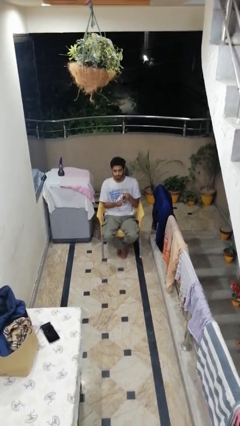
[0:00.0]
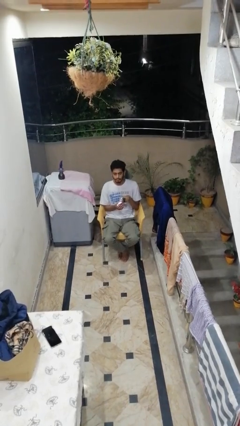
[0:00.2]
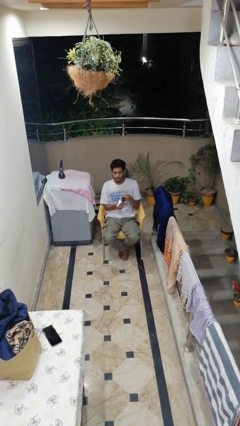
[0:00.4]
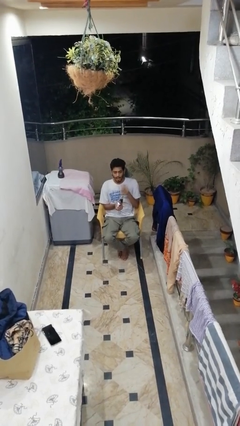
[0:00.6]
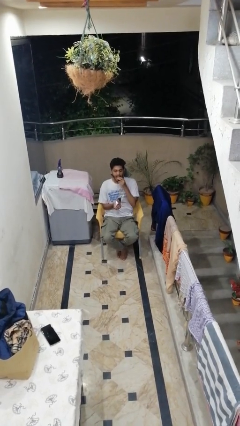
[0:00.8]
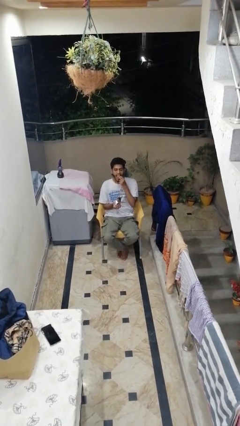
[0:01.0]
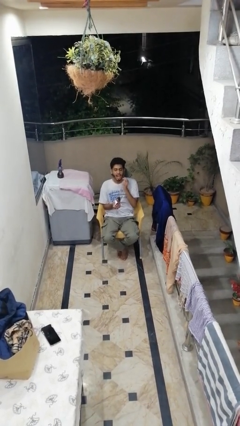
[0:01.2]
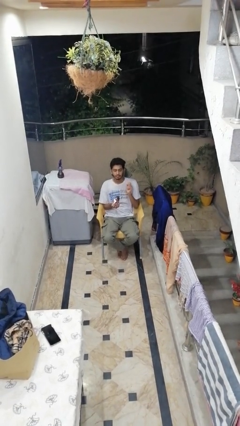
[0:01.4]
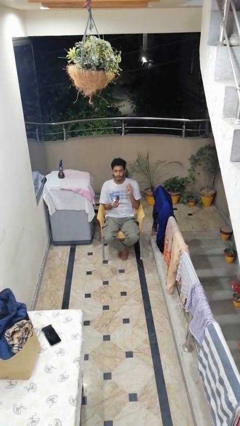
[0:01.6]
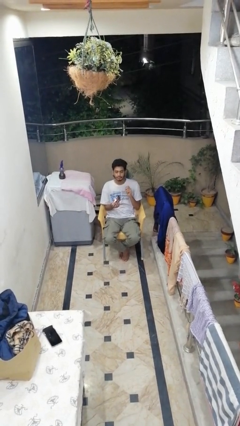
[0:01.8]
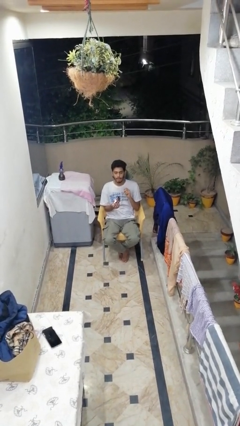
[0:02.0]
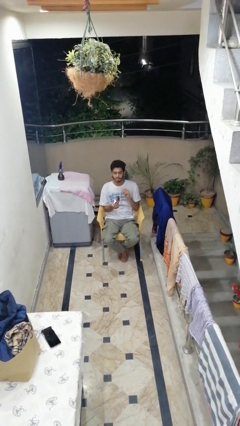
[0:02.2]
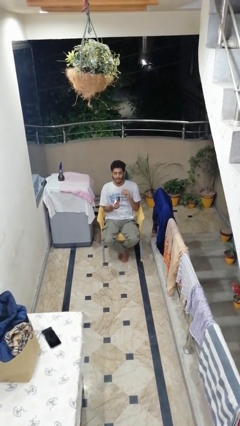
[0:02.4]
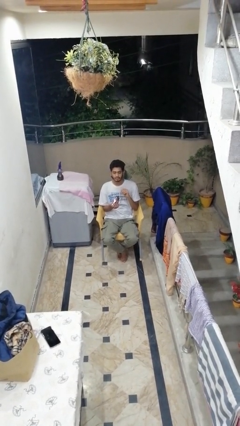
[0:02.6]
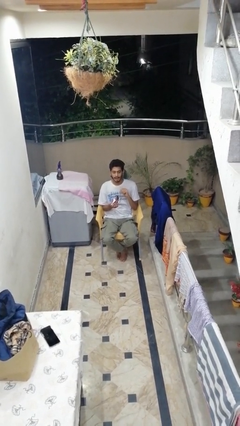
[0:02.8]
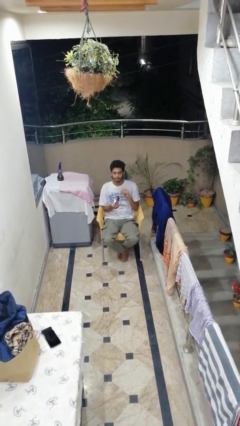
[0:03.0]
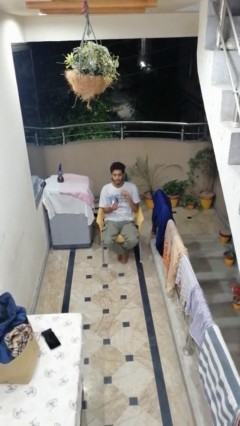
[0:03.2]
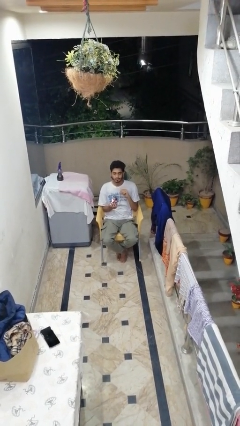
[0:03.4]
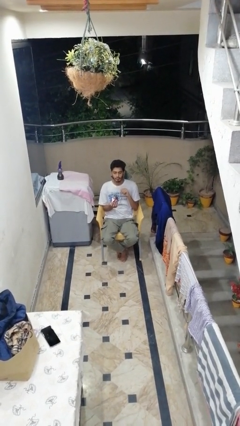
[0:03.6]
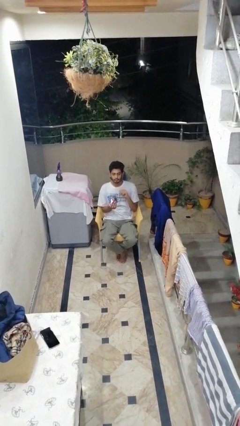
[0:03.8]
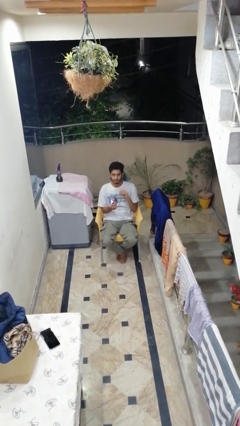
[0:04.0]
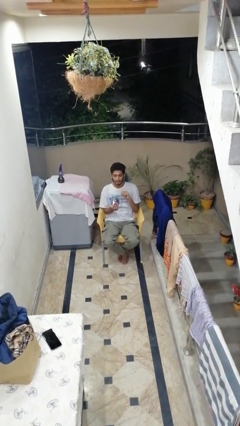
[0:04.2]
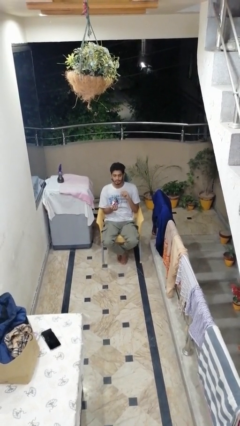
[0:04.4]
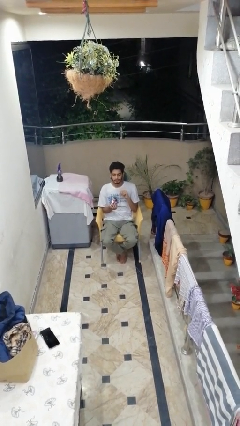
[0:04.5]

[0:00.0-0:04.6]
person eats snack from bag

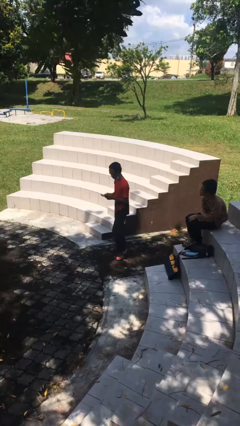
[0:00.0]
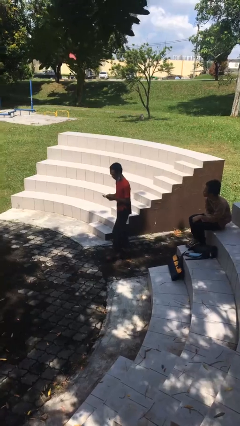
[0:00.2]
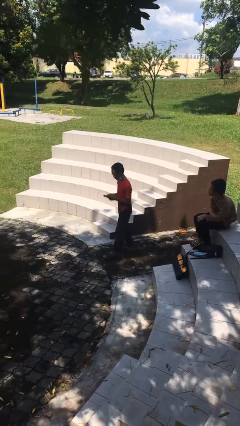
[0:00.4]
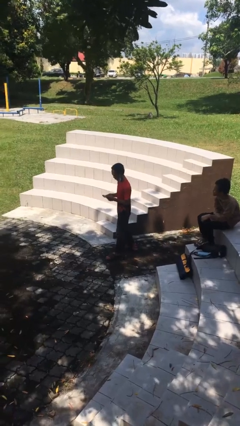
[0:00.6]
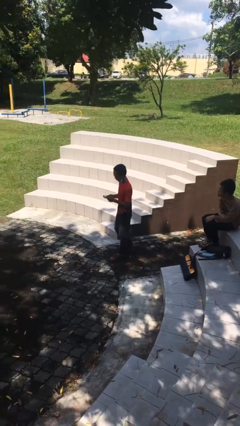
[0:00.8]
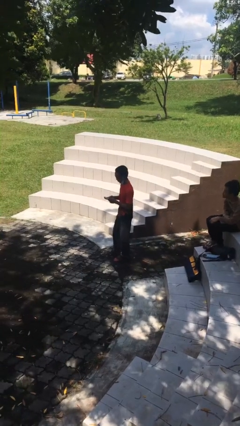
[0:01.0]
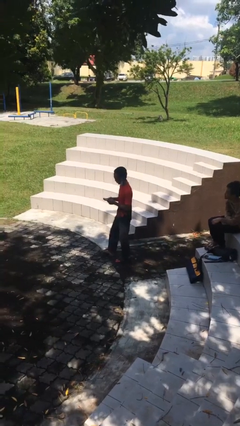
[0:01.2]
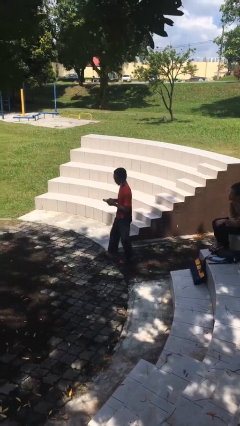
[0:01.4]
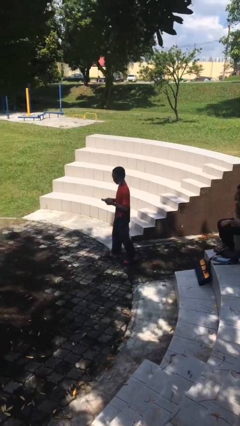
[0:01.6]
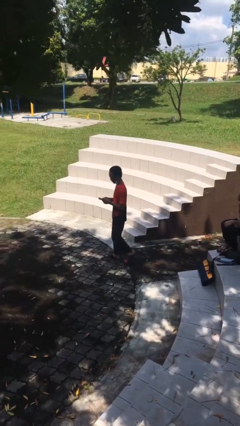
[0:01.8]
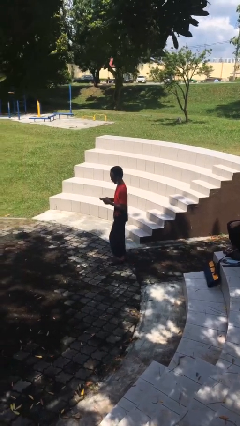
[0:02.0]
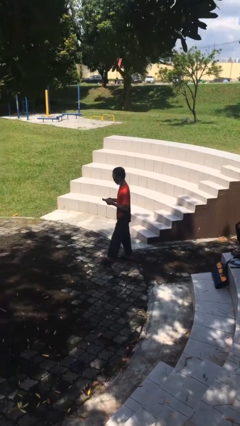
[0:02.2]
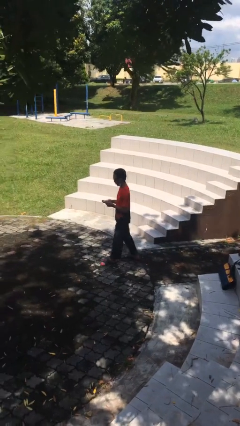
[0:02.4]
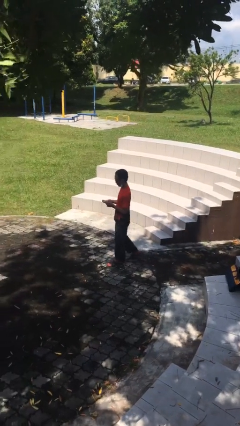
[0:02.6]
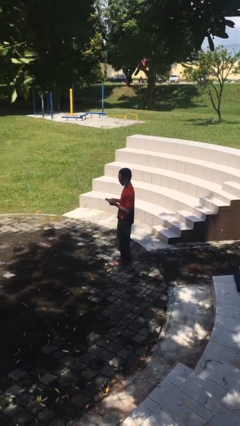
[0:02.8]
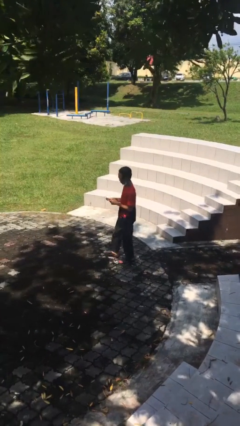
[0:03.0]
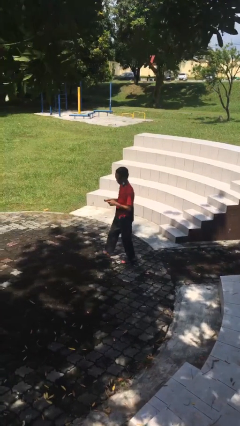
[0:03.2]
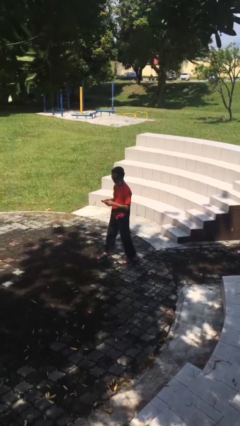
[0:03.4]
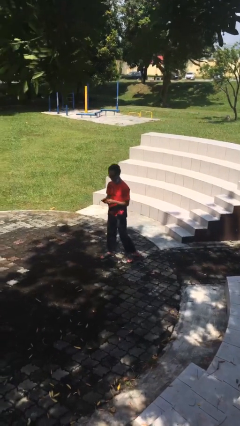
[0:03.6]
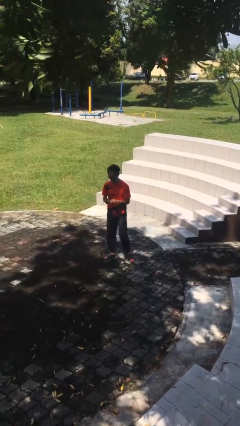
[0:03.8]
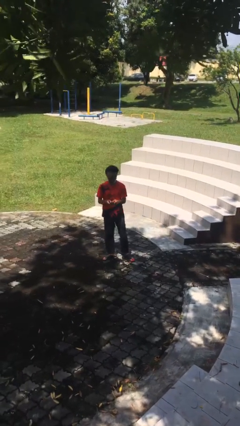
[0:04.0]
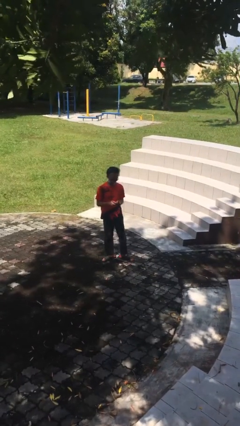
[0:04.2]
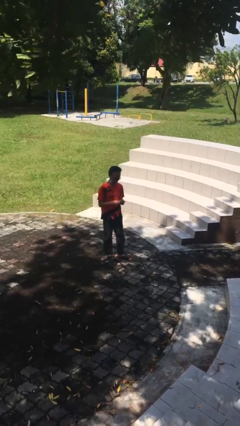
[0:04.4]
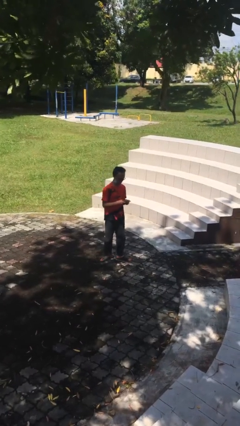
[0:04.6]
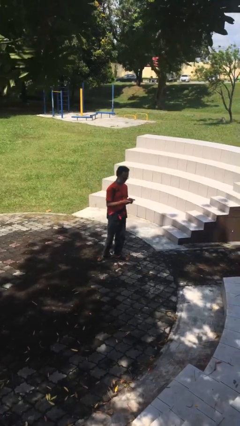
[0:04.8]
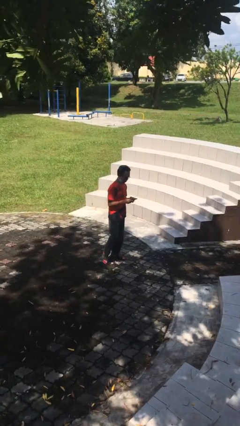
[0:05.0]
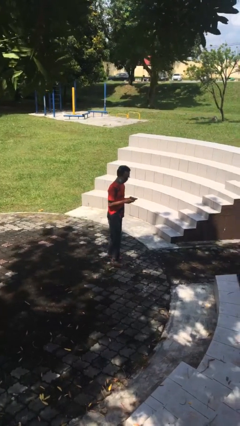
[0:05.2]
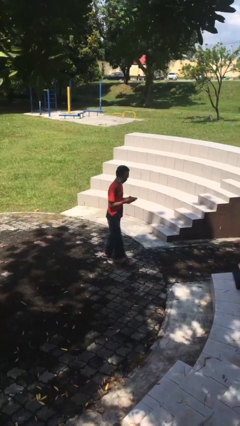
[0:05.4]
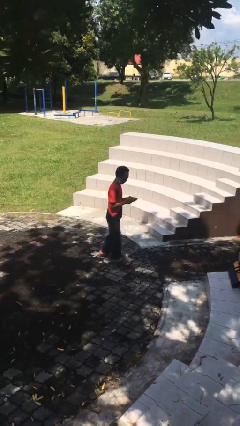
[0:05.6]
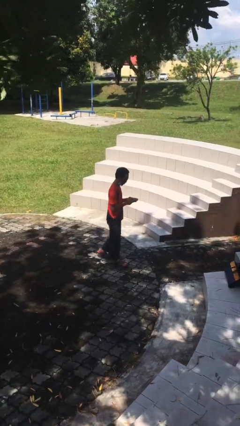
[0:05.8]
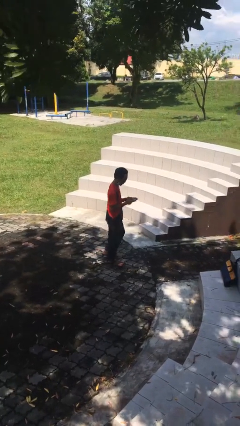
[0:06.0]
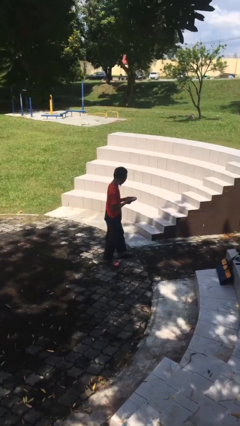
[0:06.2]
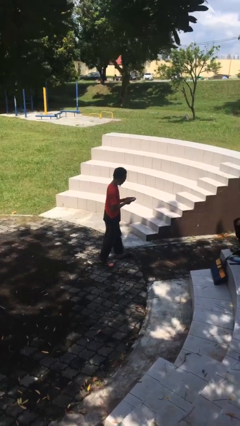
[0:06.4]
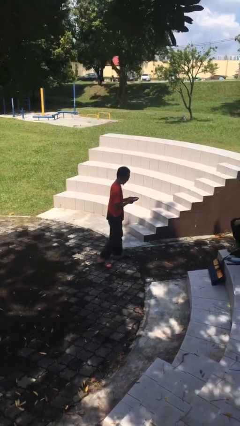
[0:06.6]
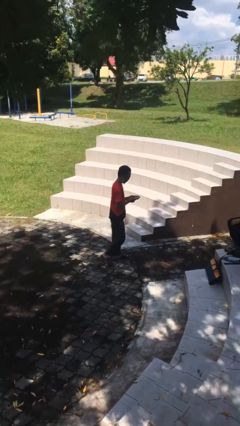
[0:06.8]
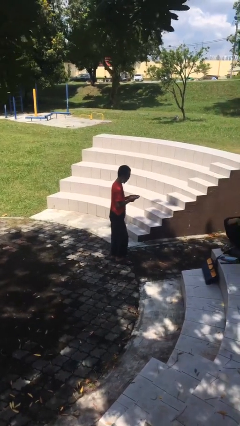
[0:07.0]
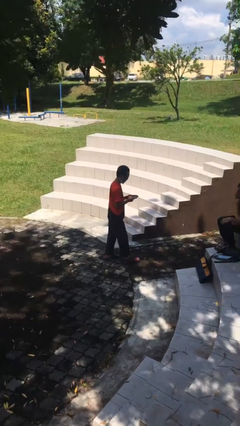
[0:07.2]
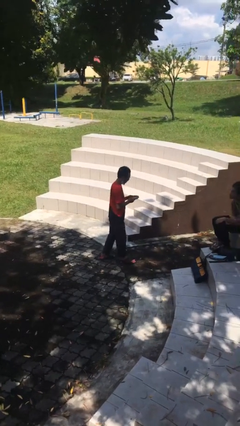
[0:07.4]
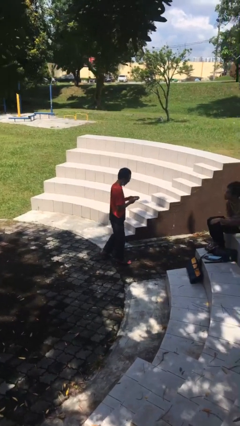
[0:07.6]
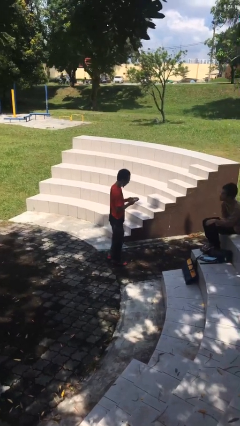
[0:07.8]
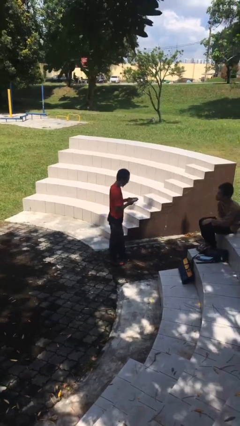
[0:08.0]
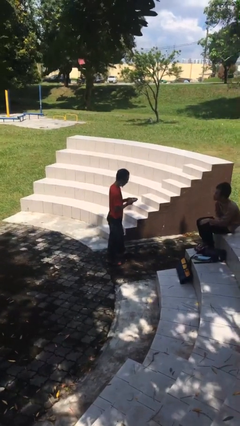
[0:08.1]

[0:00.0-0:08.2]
person texts on phone

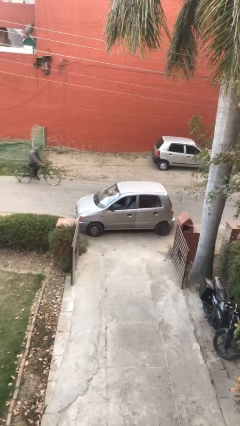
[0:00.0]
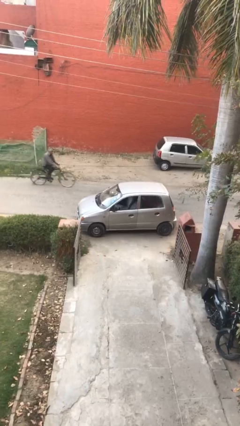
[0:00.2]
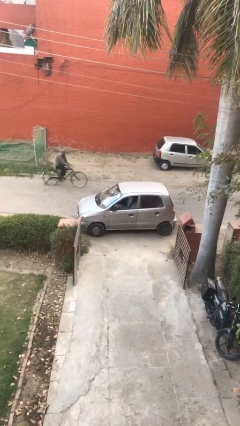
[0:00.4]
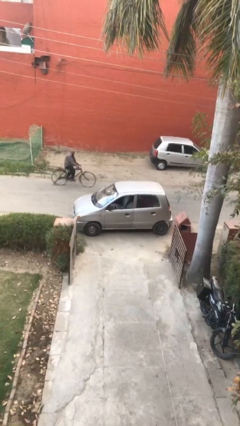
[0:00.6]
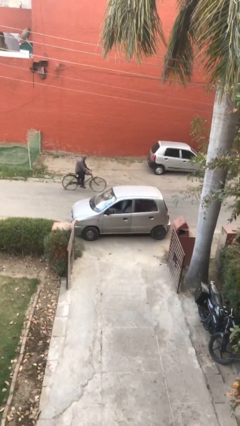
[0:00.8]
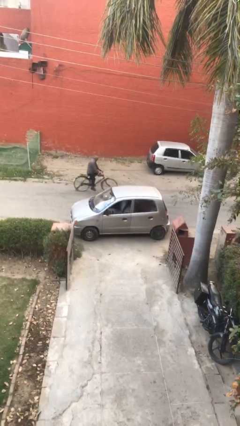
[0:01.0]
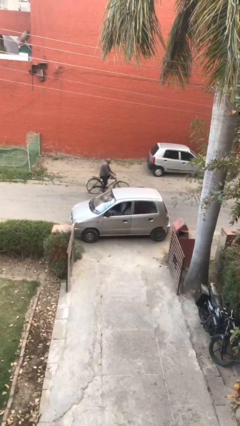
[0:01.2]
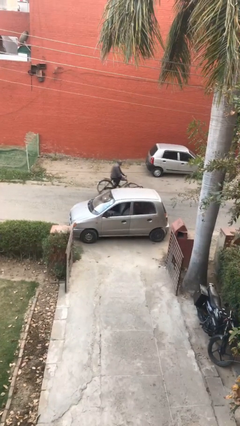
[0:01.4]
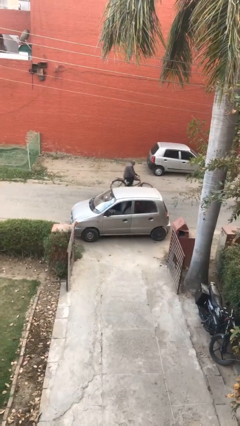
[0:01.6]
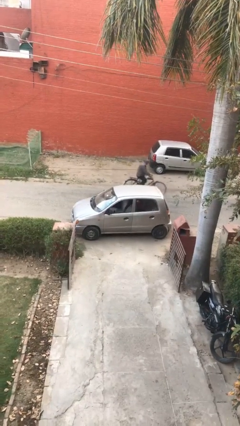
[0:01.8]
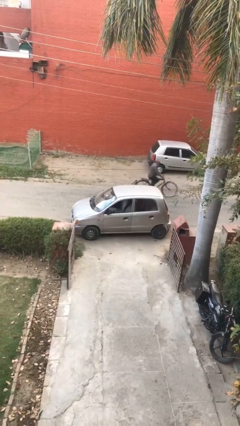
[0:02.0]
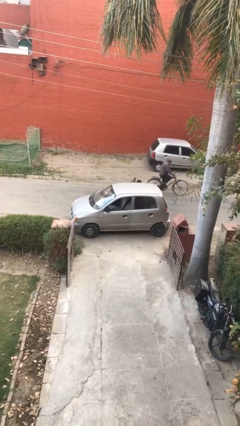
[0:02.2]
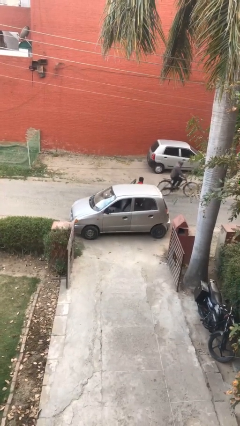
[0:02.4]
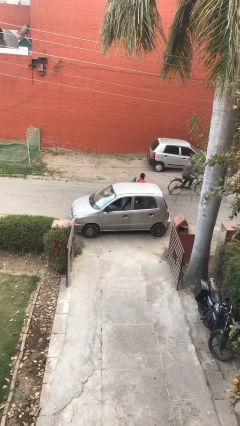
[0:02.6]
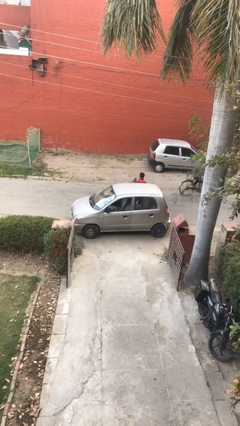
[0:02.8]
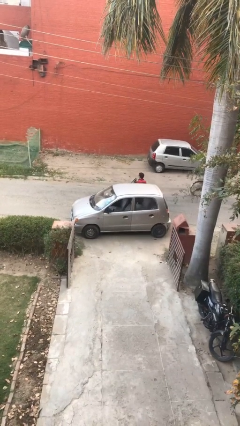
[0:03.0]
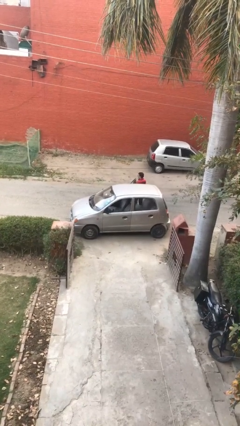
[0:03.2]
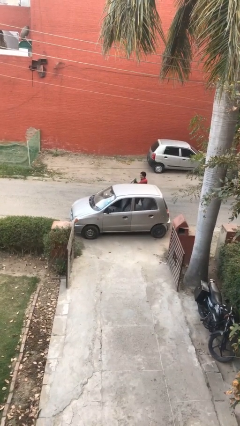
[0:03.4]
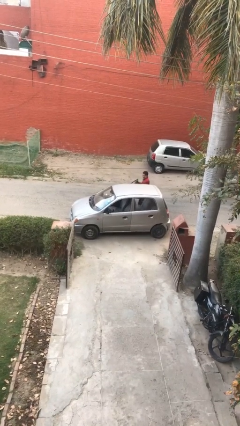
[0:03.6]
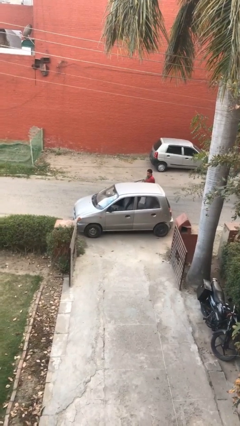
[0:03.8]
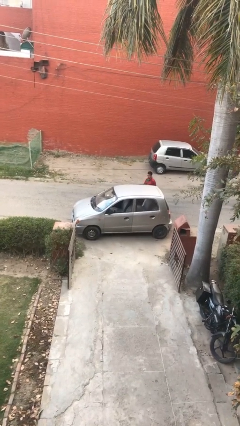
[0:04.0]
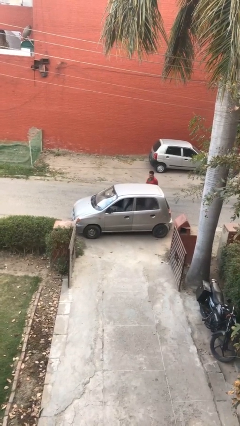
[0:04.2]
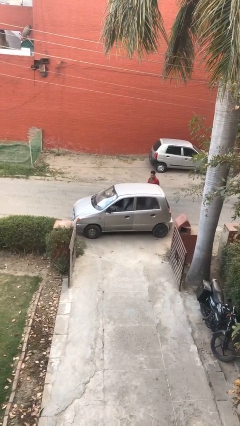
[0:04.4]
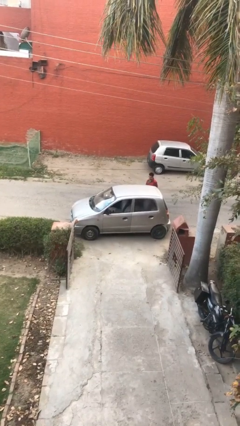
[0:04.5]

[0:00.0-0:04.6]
car drops off person

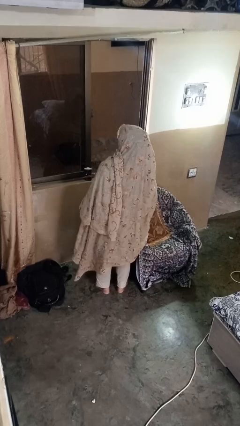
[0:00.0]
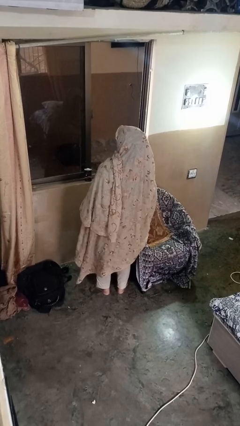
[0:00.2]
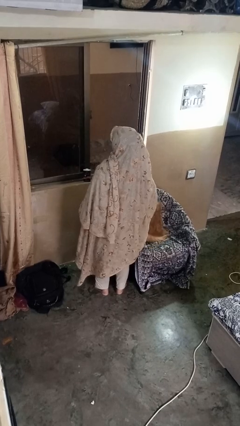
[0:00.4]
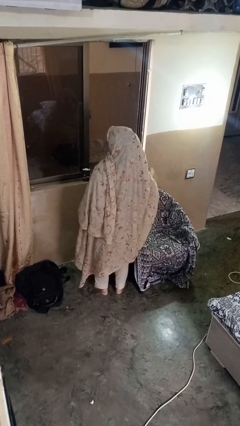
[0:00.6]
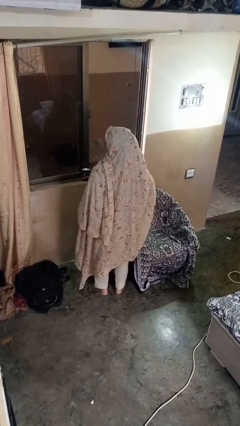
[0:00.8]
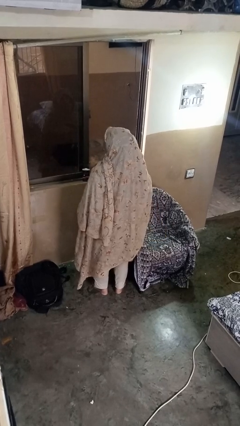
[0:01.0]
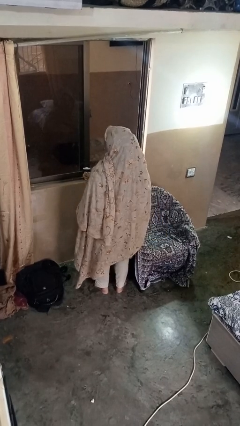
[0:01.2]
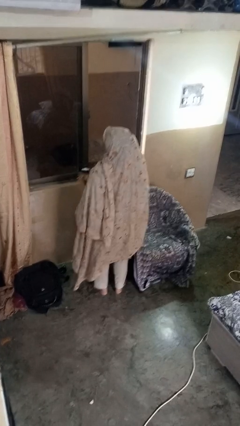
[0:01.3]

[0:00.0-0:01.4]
person picks up object from couch
